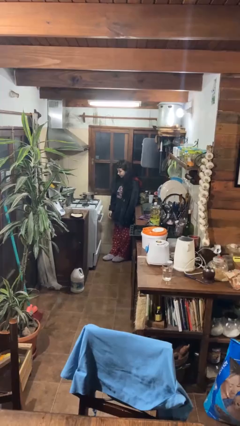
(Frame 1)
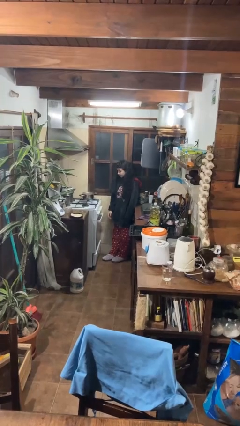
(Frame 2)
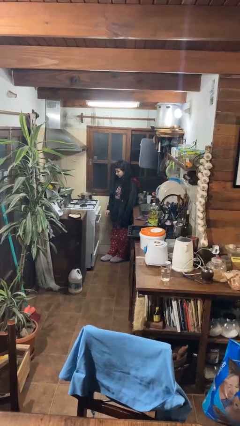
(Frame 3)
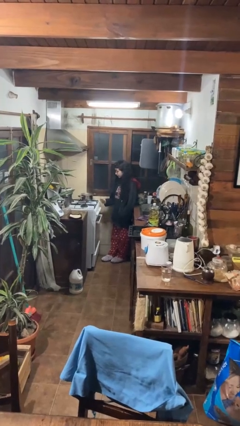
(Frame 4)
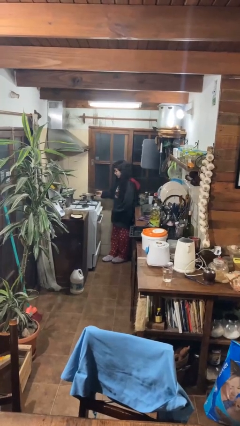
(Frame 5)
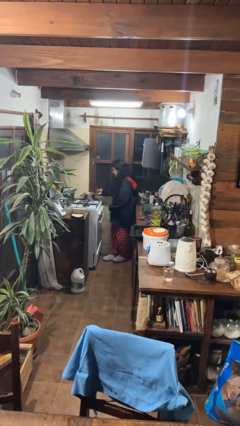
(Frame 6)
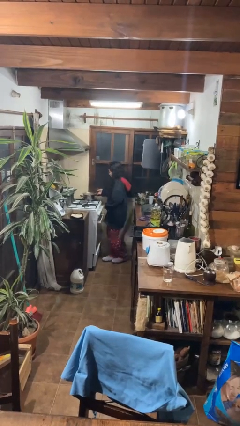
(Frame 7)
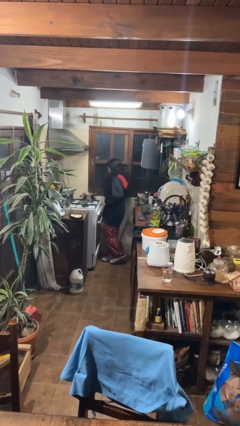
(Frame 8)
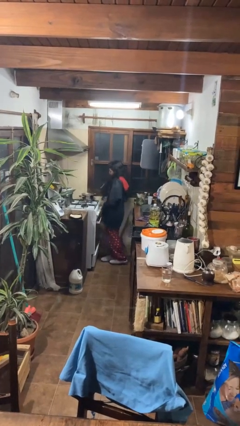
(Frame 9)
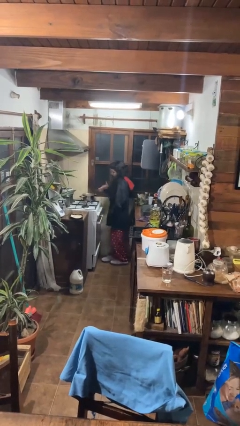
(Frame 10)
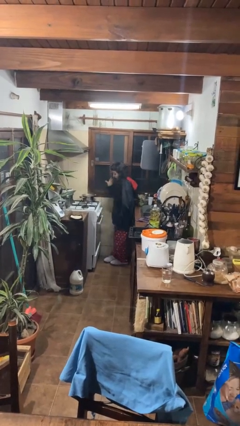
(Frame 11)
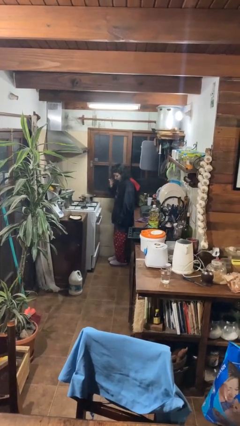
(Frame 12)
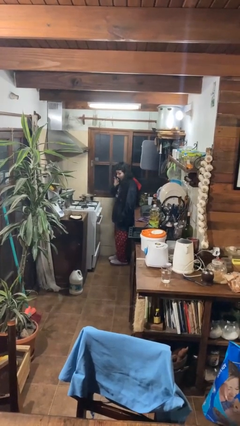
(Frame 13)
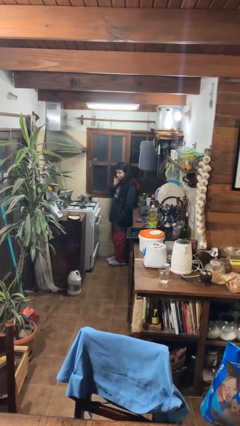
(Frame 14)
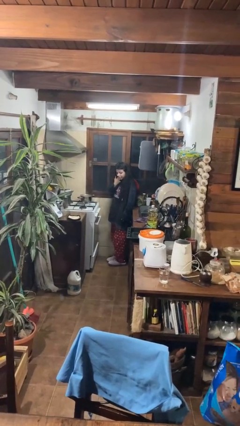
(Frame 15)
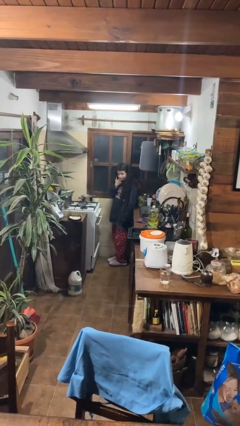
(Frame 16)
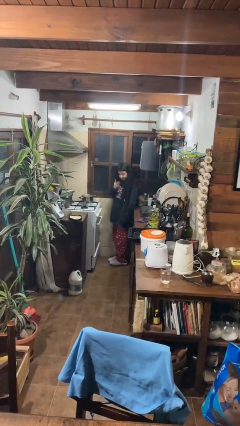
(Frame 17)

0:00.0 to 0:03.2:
person burns hand

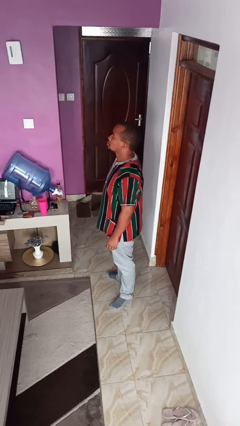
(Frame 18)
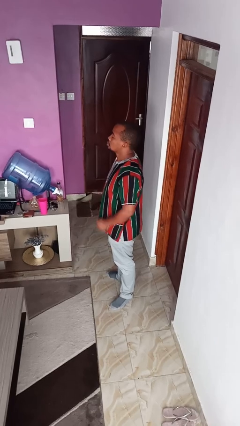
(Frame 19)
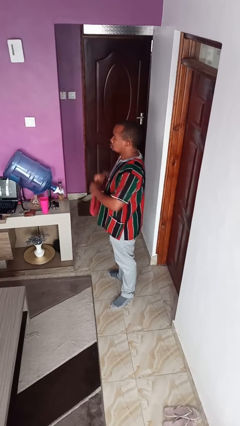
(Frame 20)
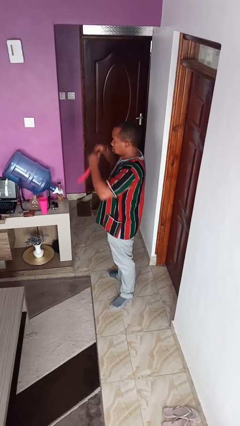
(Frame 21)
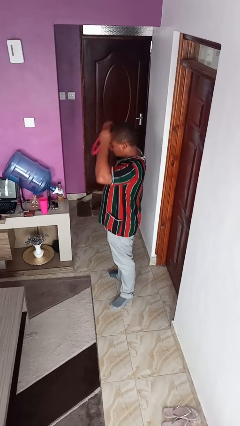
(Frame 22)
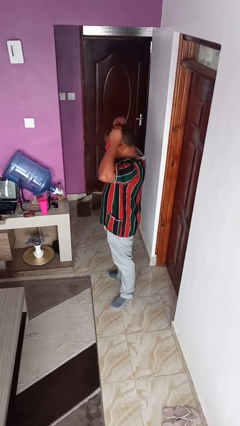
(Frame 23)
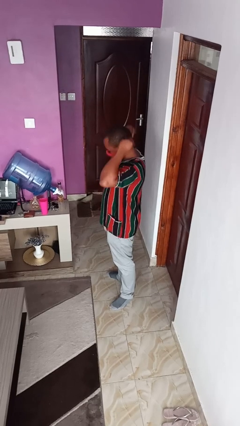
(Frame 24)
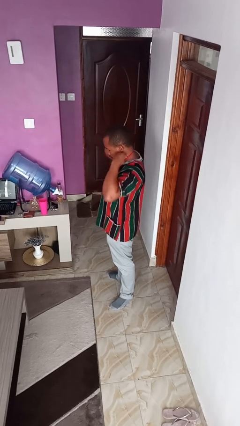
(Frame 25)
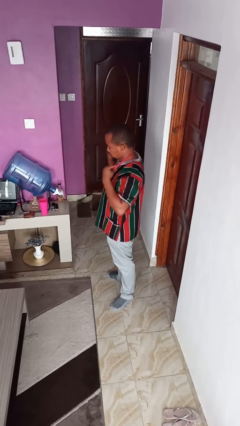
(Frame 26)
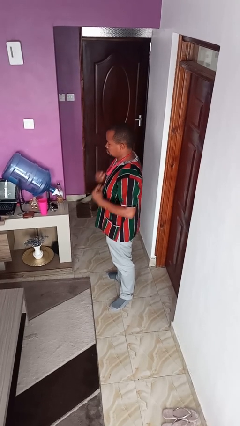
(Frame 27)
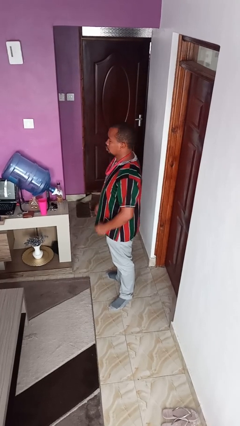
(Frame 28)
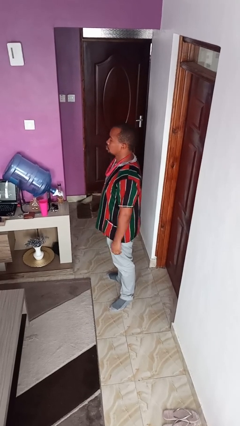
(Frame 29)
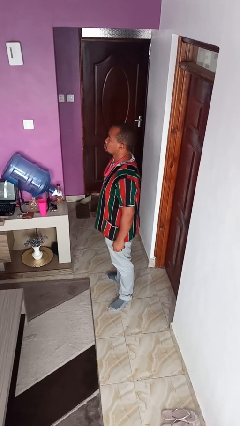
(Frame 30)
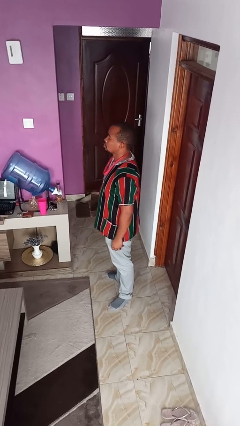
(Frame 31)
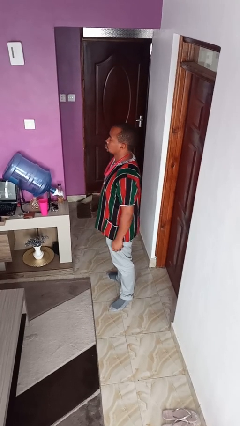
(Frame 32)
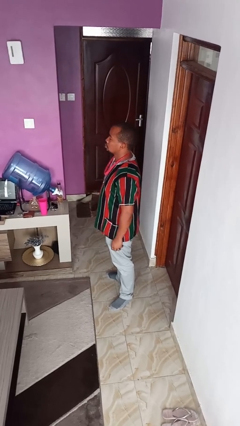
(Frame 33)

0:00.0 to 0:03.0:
person puts on necklace

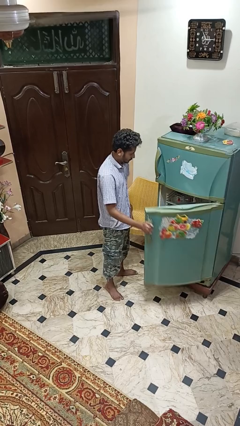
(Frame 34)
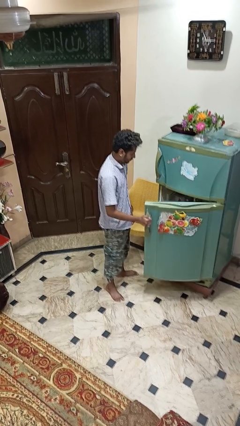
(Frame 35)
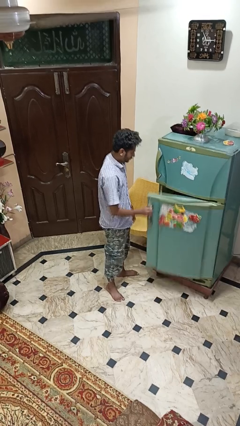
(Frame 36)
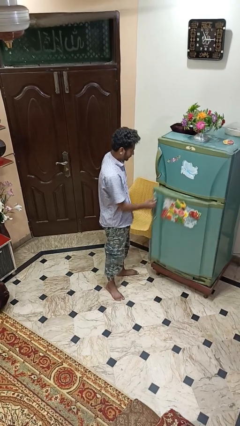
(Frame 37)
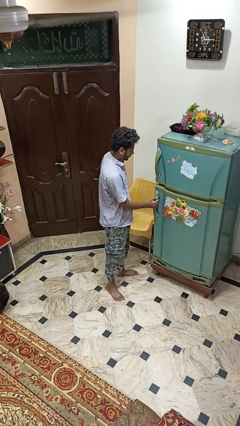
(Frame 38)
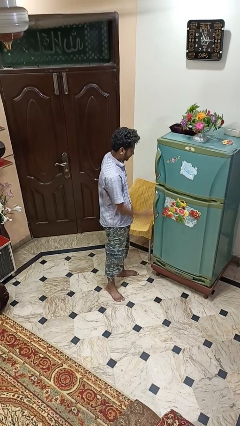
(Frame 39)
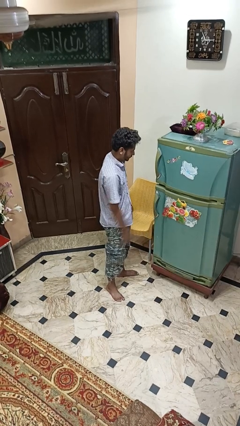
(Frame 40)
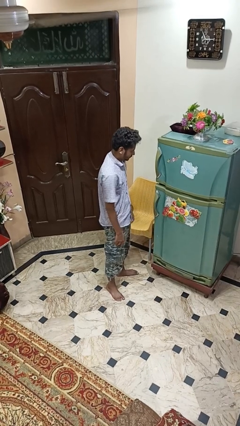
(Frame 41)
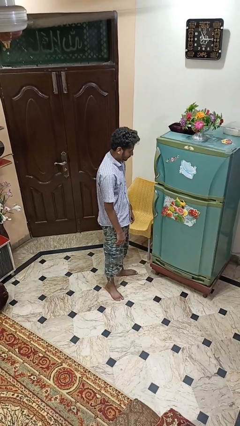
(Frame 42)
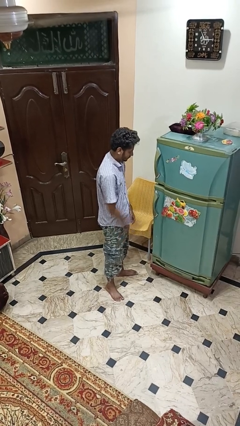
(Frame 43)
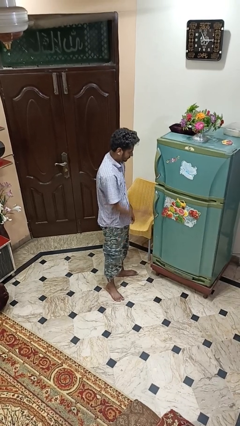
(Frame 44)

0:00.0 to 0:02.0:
person closes refrigerator

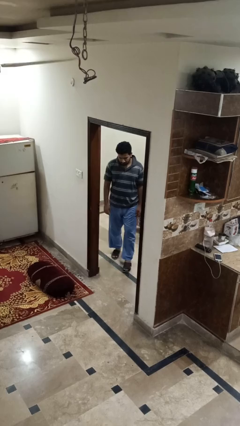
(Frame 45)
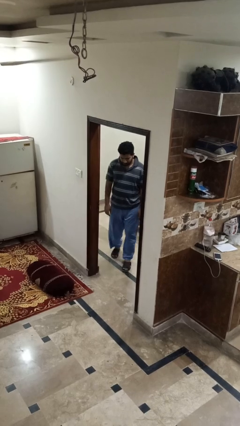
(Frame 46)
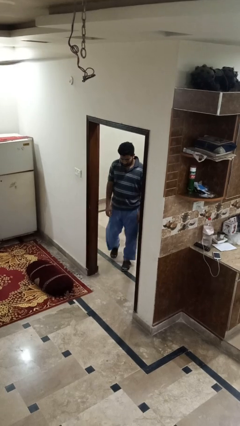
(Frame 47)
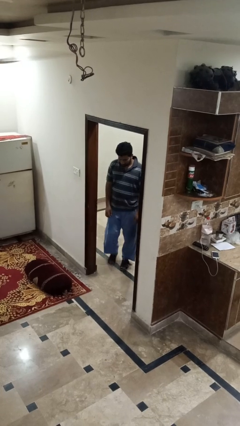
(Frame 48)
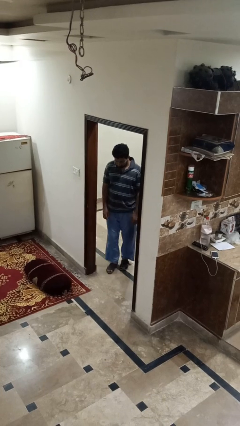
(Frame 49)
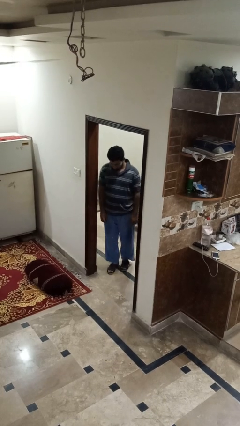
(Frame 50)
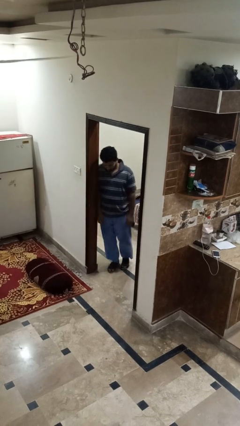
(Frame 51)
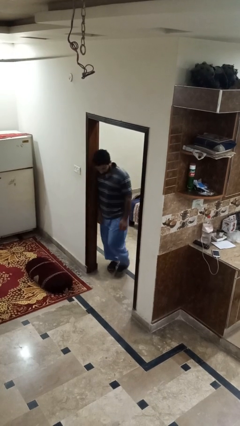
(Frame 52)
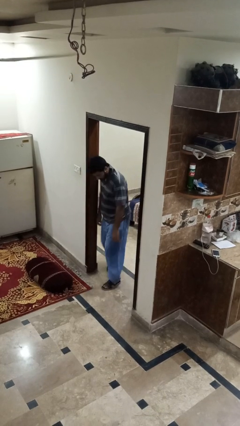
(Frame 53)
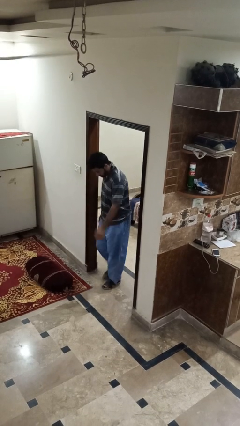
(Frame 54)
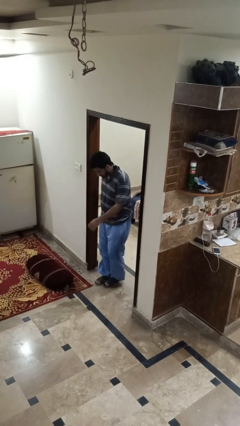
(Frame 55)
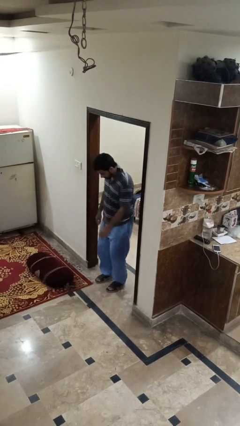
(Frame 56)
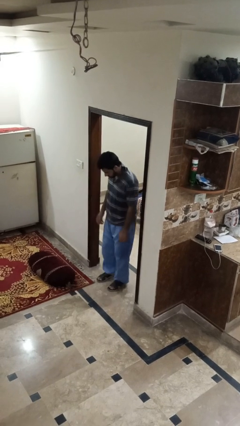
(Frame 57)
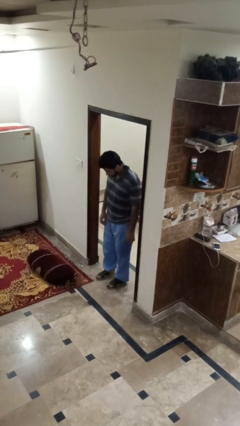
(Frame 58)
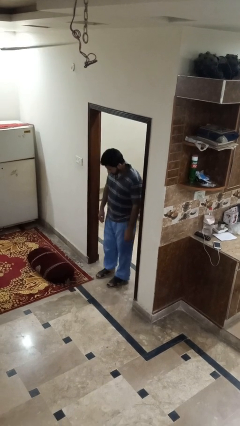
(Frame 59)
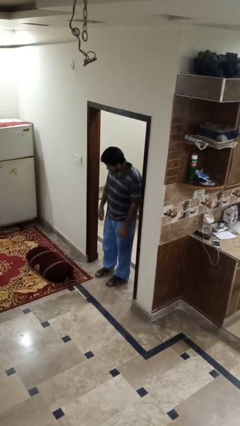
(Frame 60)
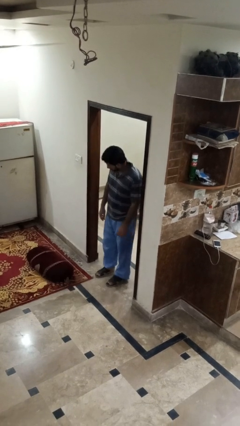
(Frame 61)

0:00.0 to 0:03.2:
person bumps into wall

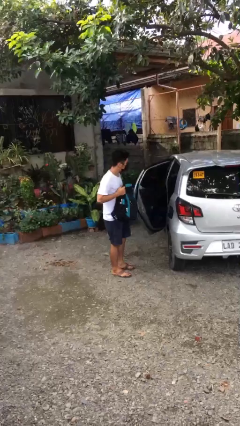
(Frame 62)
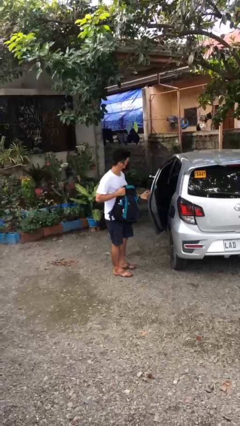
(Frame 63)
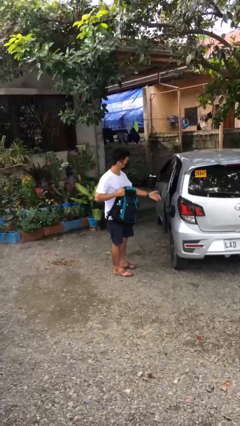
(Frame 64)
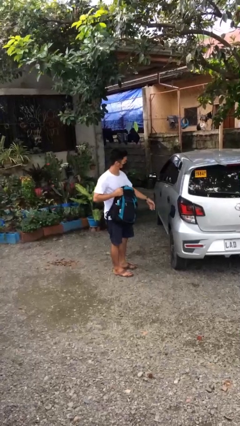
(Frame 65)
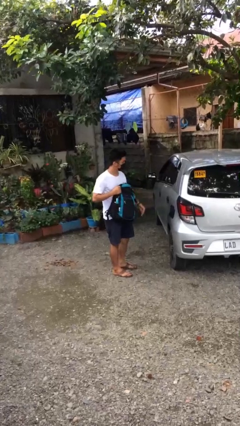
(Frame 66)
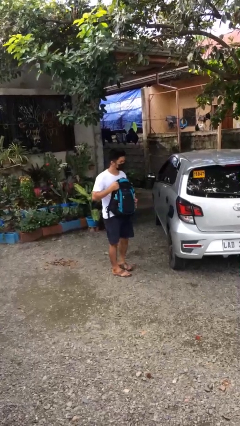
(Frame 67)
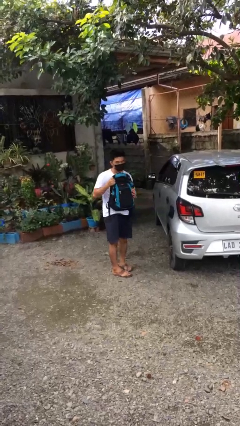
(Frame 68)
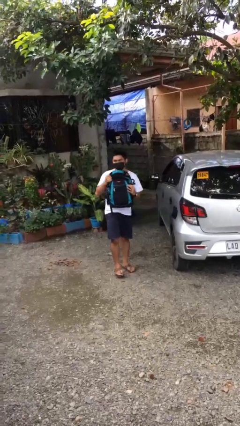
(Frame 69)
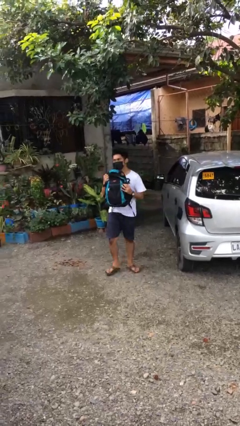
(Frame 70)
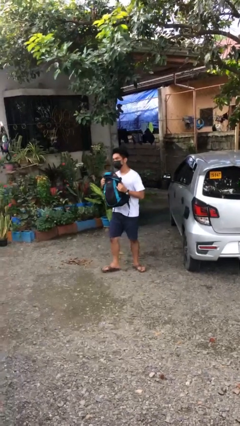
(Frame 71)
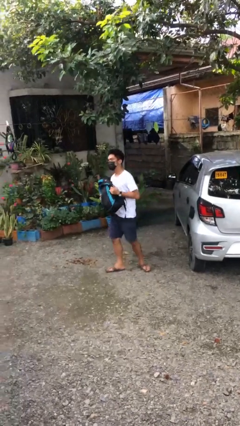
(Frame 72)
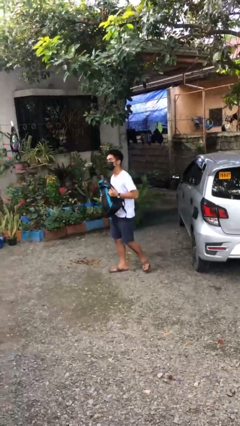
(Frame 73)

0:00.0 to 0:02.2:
person closes car door

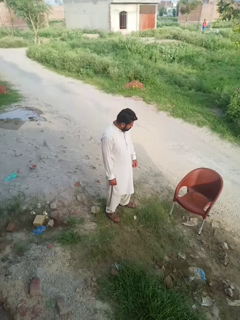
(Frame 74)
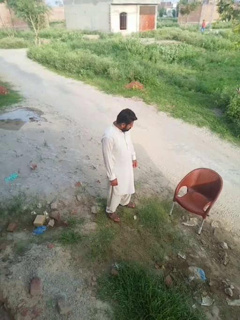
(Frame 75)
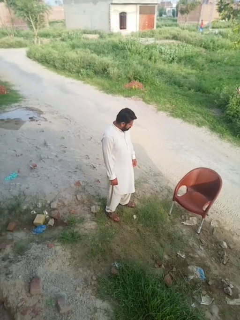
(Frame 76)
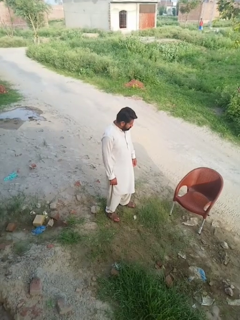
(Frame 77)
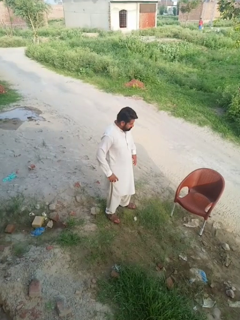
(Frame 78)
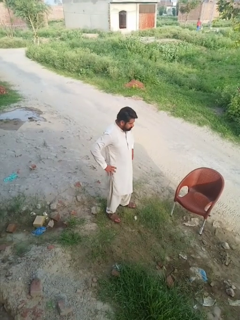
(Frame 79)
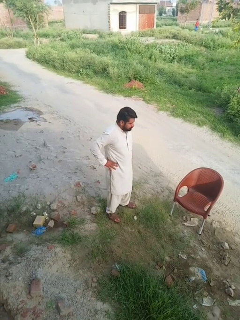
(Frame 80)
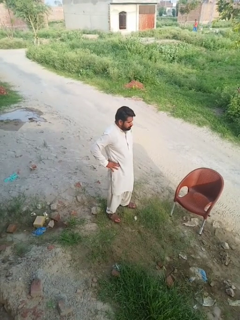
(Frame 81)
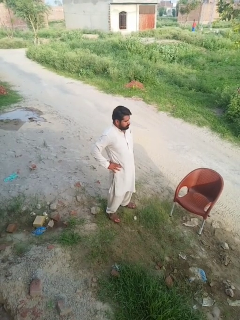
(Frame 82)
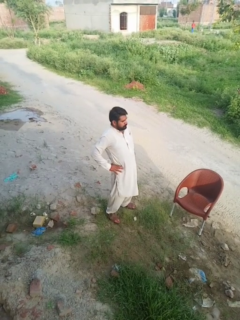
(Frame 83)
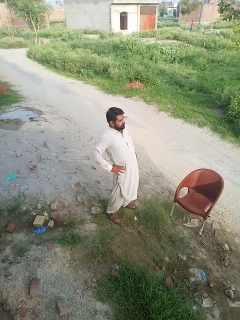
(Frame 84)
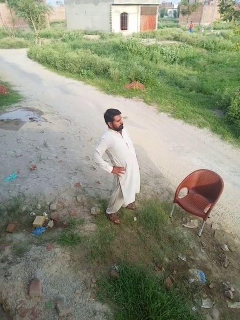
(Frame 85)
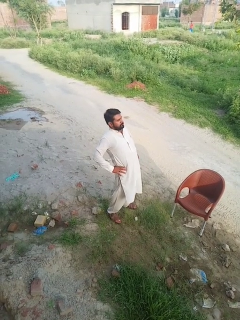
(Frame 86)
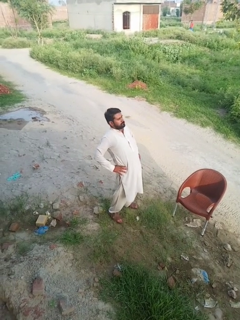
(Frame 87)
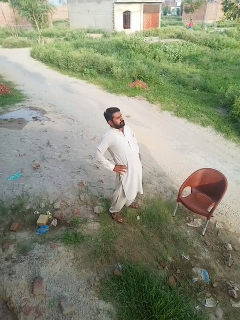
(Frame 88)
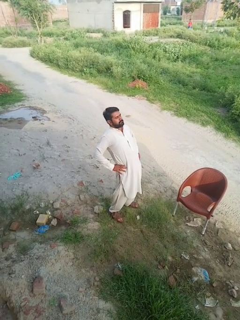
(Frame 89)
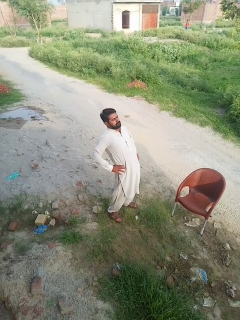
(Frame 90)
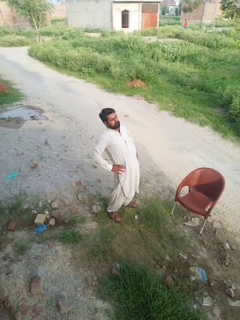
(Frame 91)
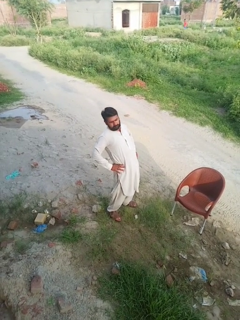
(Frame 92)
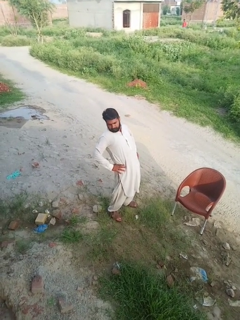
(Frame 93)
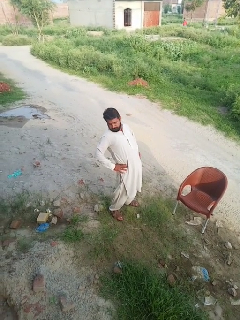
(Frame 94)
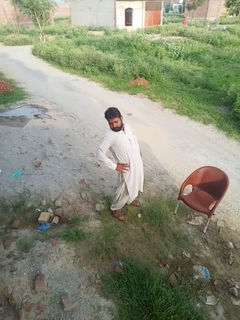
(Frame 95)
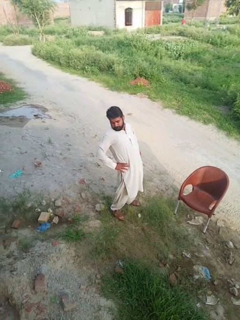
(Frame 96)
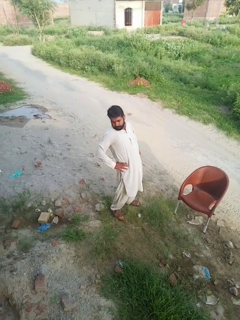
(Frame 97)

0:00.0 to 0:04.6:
person stretches back
